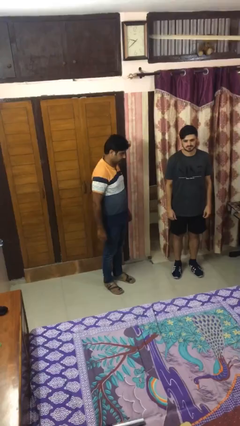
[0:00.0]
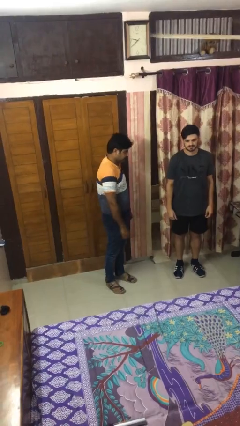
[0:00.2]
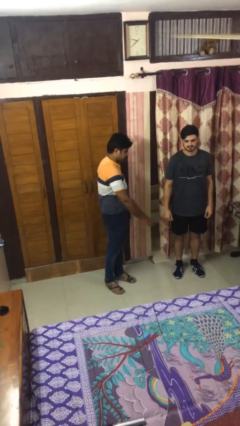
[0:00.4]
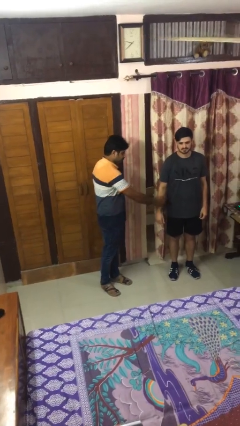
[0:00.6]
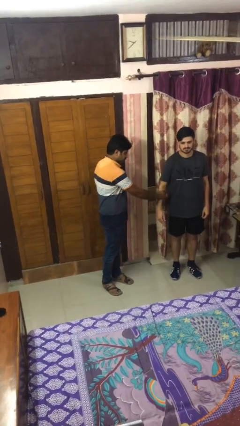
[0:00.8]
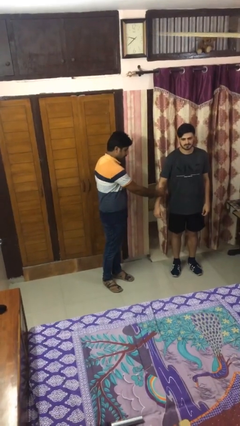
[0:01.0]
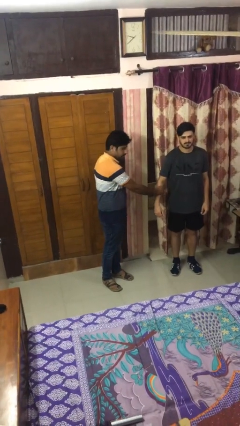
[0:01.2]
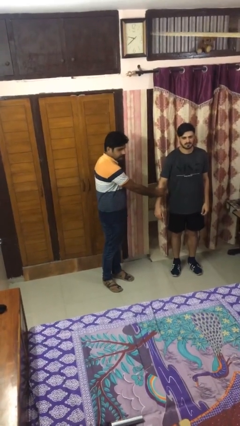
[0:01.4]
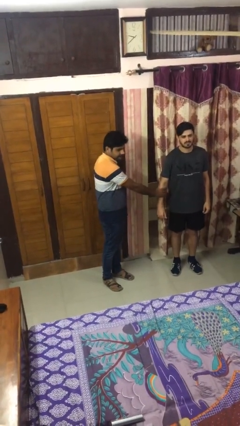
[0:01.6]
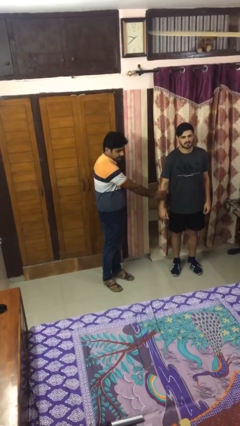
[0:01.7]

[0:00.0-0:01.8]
person grabs person by forearm

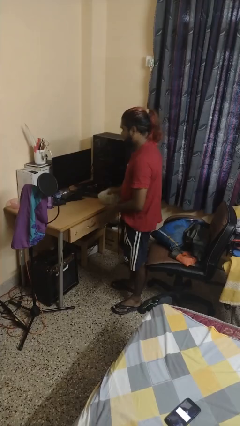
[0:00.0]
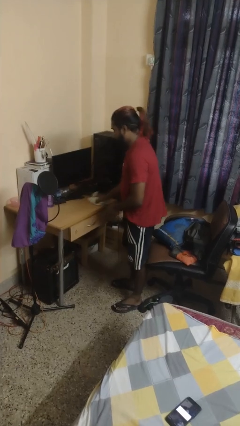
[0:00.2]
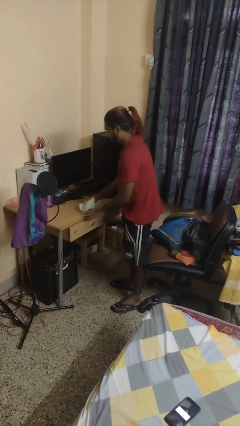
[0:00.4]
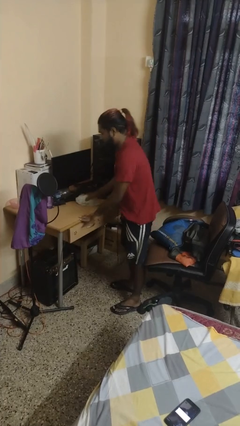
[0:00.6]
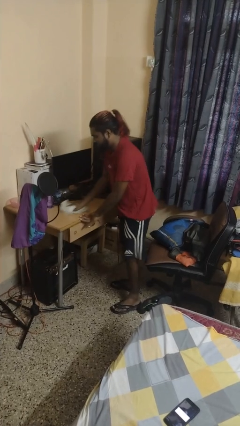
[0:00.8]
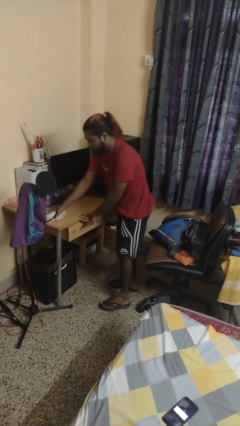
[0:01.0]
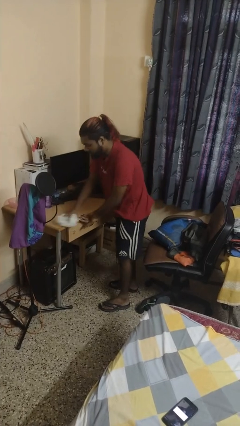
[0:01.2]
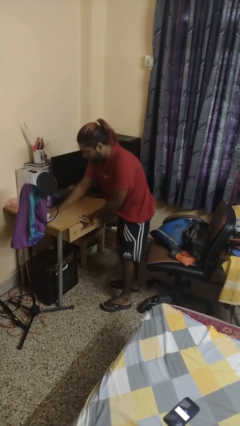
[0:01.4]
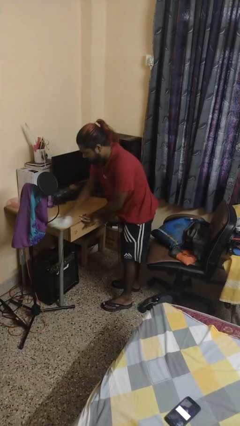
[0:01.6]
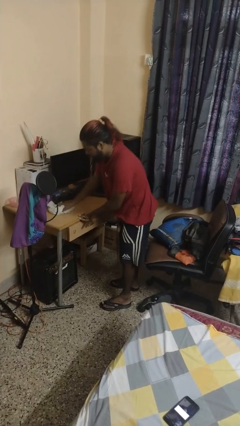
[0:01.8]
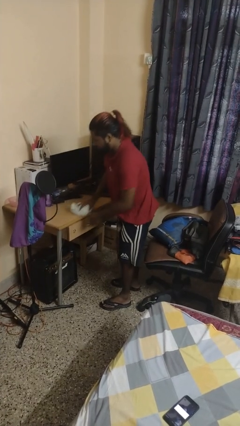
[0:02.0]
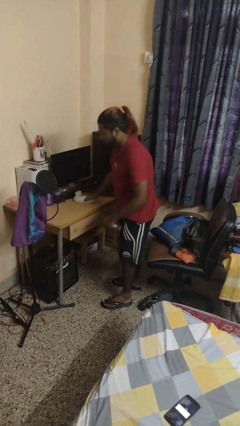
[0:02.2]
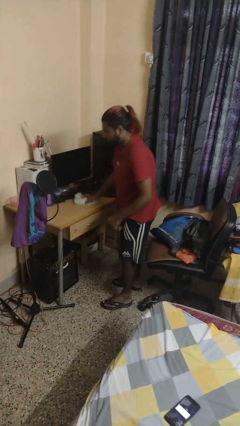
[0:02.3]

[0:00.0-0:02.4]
person cleans table with rag

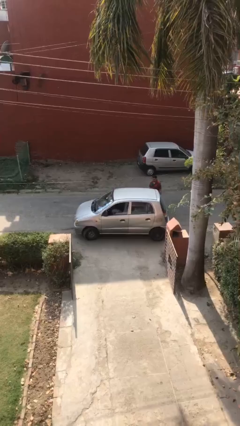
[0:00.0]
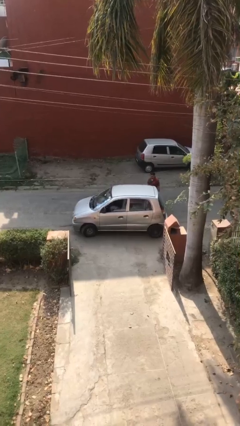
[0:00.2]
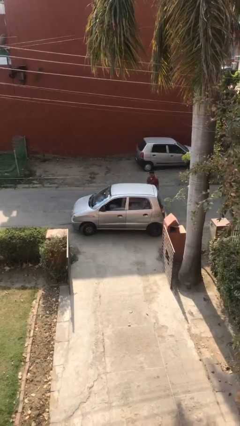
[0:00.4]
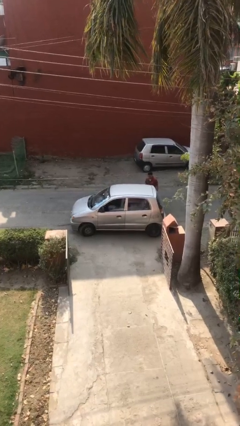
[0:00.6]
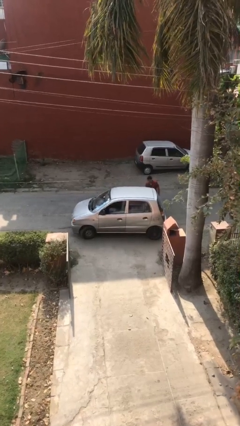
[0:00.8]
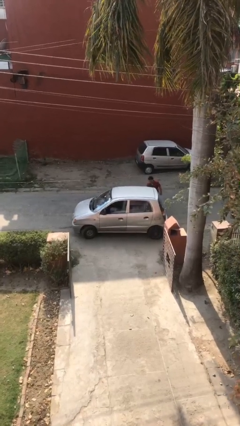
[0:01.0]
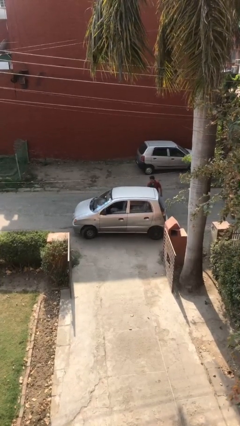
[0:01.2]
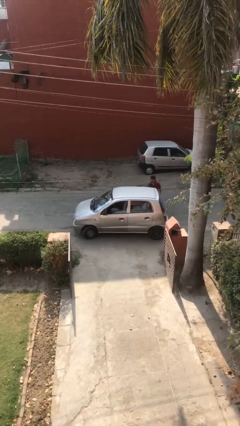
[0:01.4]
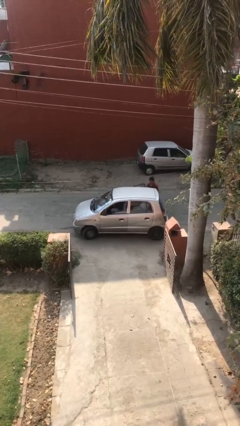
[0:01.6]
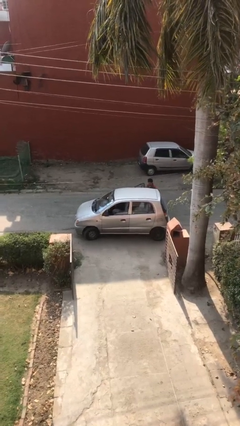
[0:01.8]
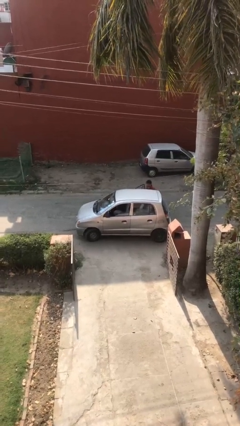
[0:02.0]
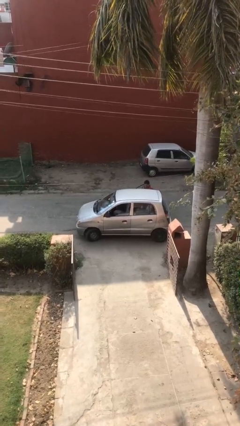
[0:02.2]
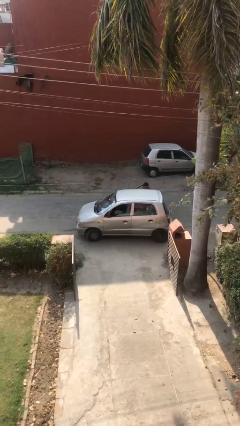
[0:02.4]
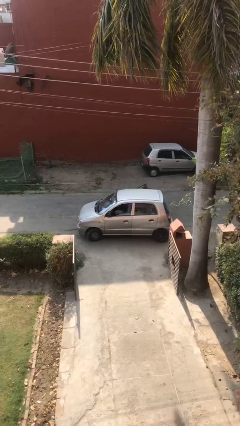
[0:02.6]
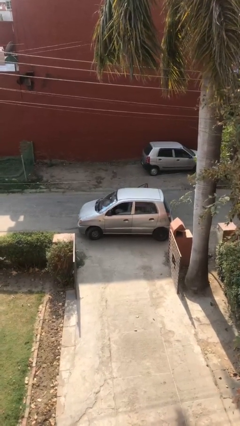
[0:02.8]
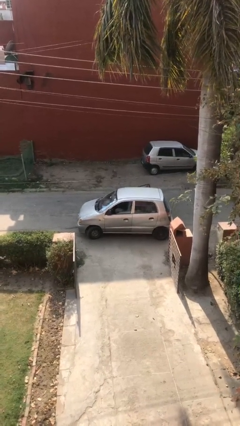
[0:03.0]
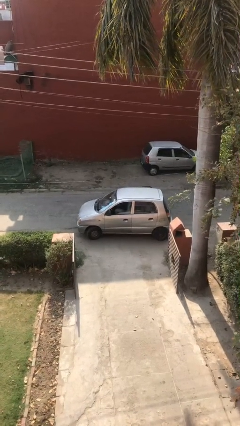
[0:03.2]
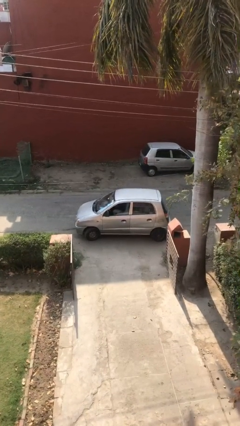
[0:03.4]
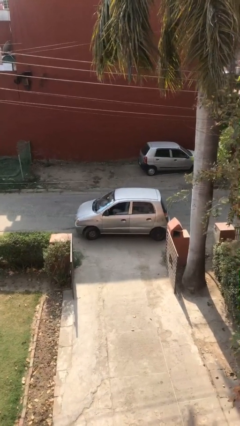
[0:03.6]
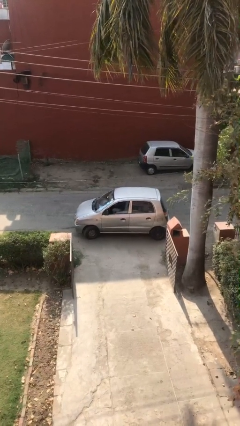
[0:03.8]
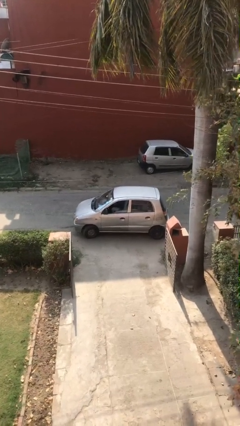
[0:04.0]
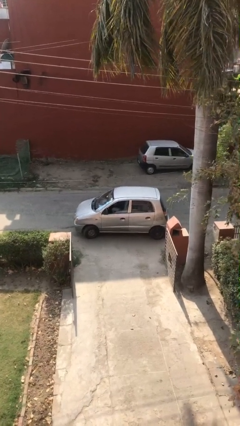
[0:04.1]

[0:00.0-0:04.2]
car picks up person

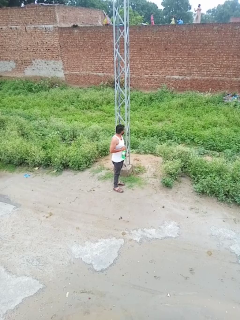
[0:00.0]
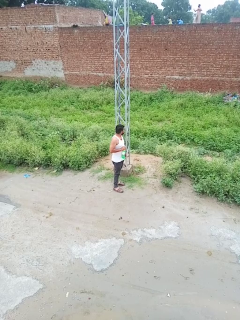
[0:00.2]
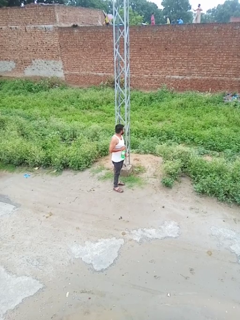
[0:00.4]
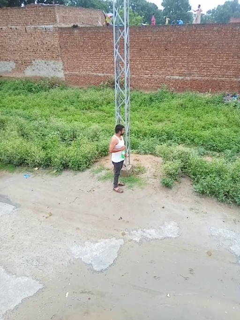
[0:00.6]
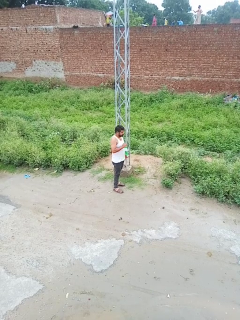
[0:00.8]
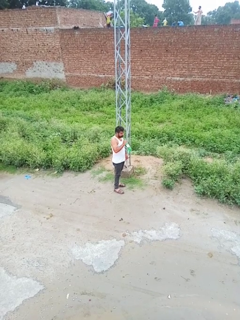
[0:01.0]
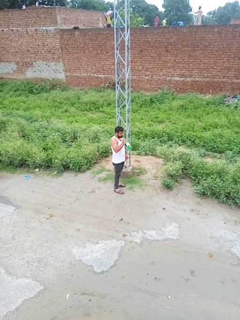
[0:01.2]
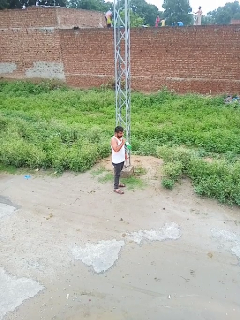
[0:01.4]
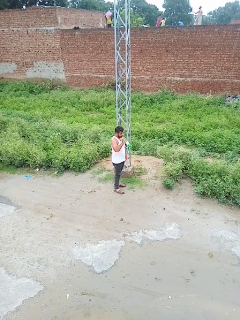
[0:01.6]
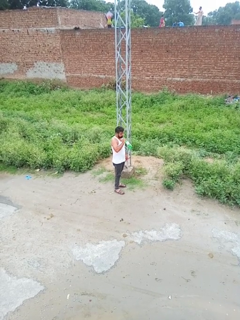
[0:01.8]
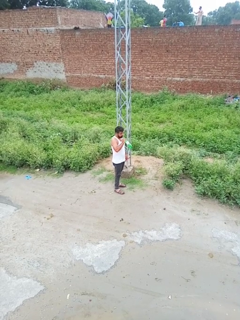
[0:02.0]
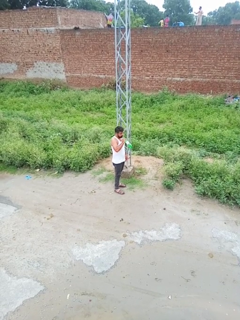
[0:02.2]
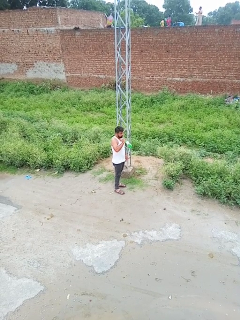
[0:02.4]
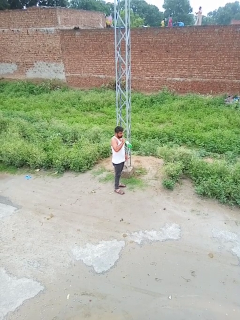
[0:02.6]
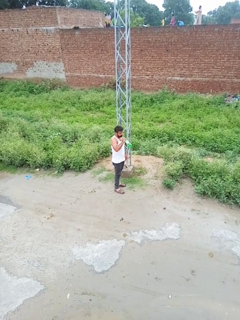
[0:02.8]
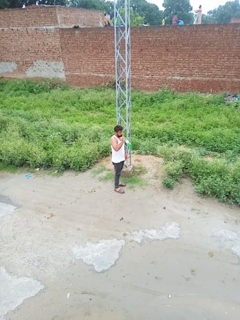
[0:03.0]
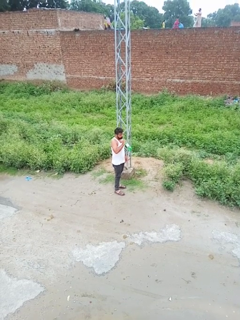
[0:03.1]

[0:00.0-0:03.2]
person drinks from straw

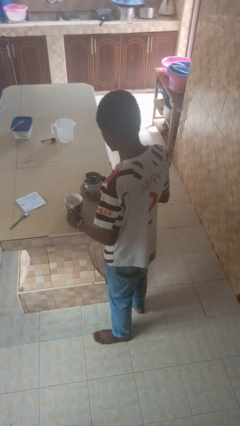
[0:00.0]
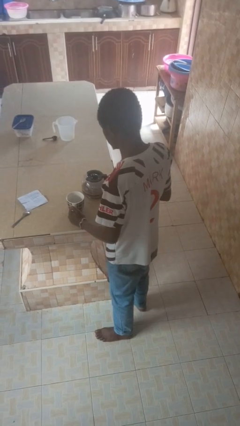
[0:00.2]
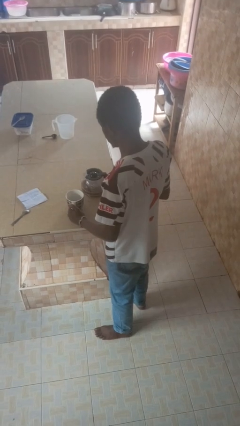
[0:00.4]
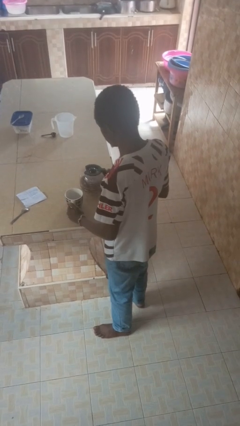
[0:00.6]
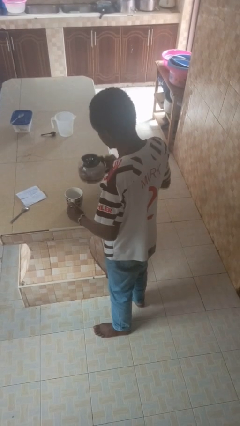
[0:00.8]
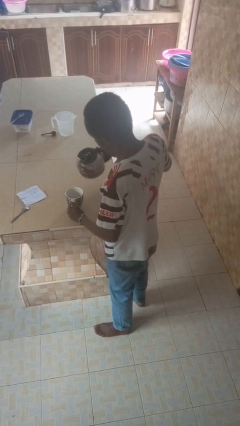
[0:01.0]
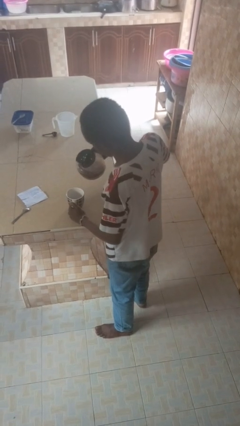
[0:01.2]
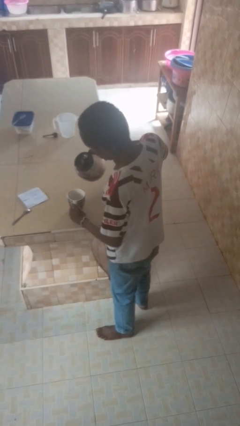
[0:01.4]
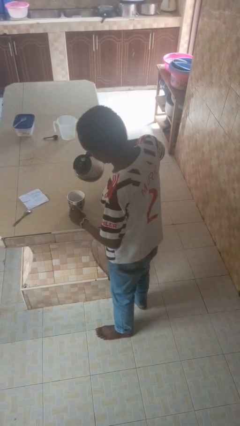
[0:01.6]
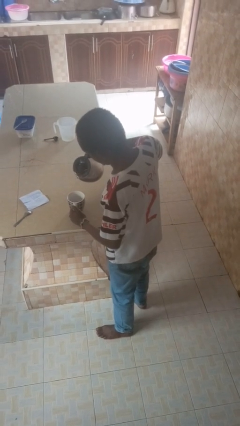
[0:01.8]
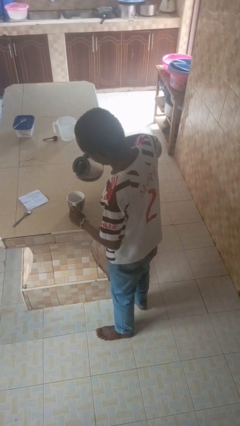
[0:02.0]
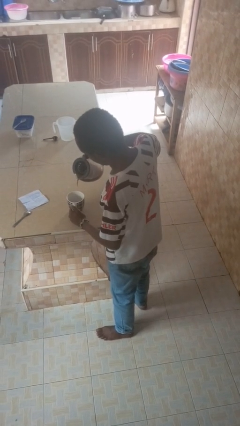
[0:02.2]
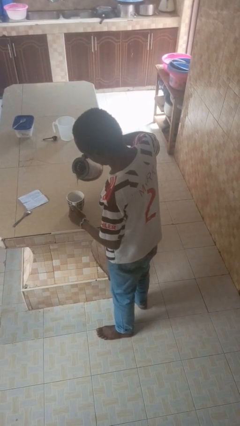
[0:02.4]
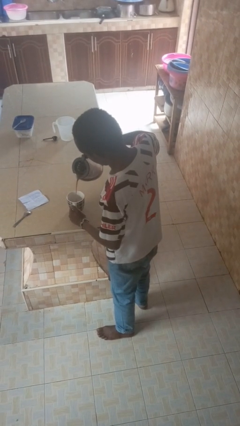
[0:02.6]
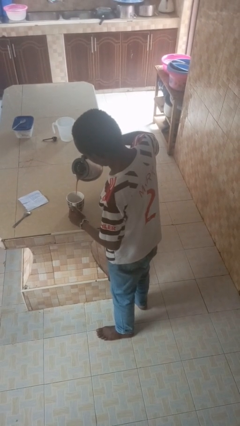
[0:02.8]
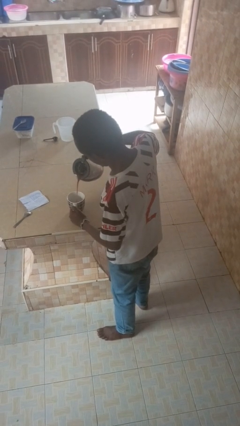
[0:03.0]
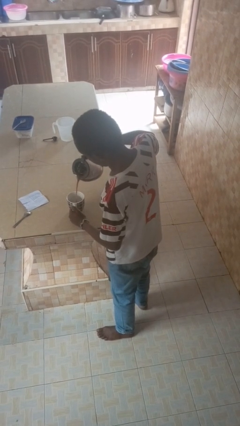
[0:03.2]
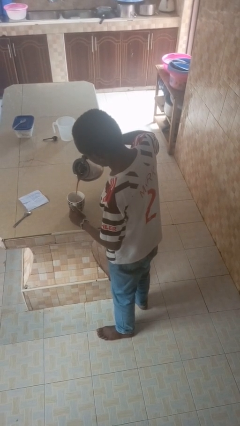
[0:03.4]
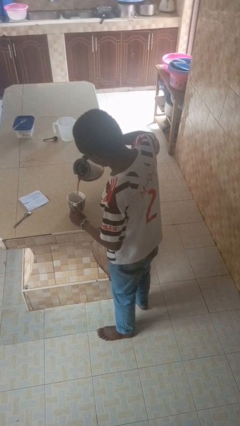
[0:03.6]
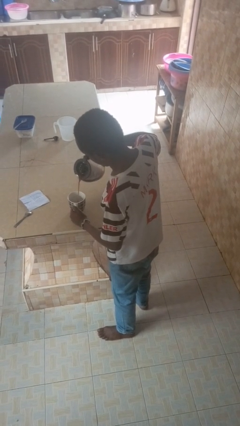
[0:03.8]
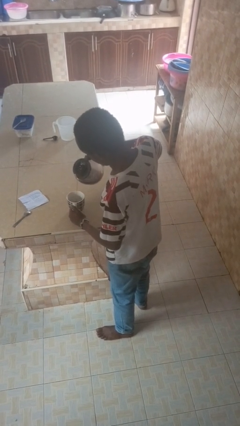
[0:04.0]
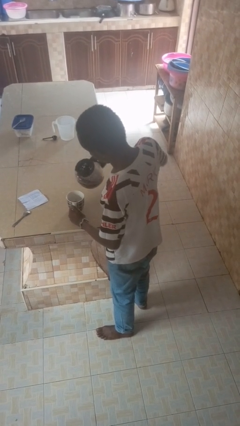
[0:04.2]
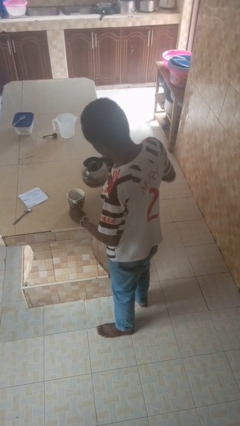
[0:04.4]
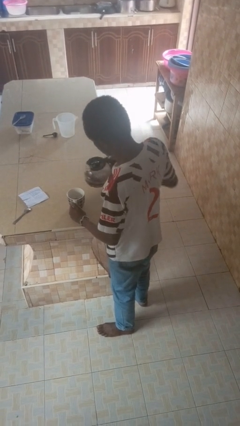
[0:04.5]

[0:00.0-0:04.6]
person pours coffee into mug

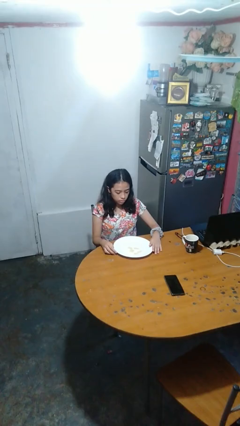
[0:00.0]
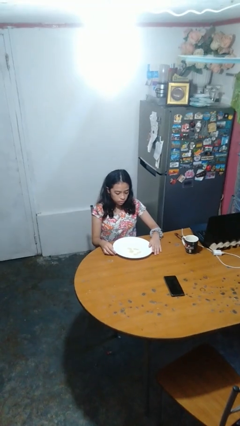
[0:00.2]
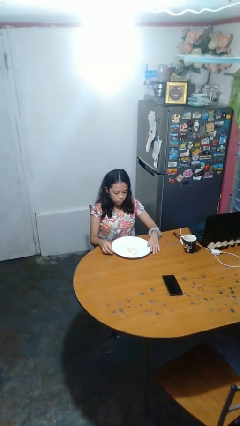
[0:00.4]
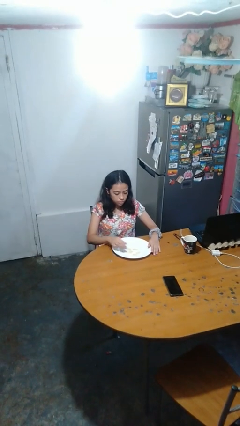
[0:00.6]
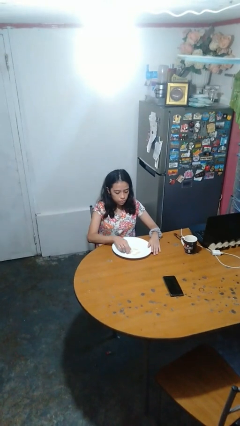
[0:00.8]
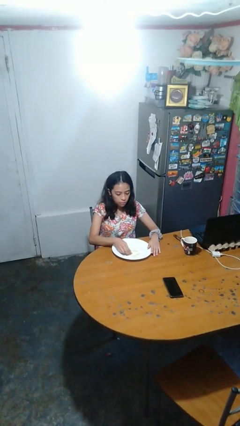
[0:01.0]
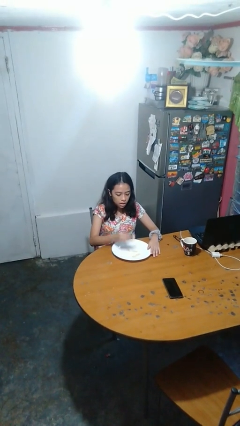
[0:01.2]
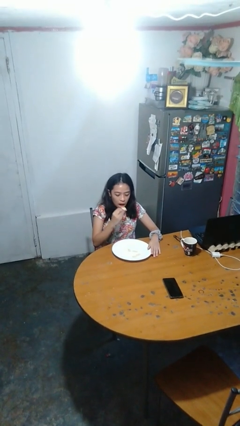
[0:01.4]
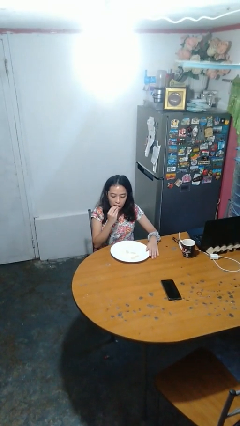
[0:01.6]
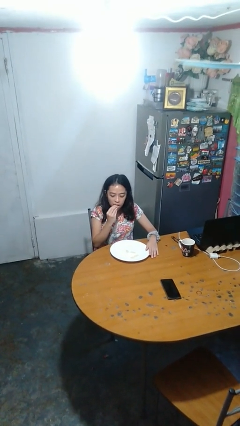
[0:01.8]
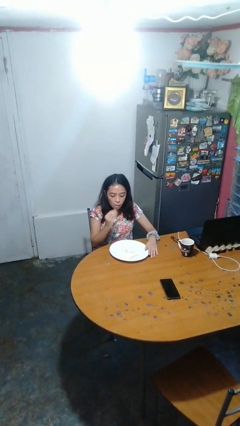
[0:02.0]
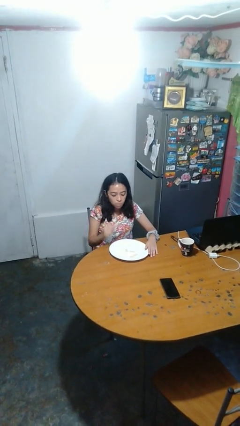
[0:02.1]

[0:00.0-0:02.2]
person eats with hands
